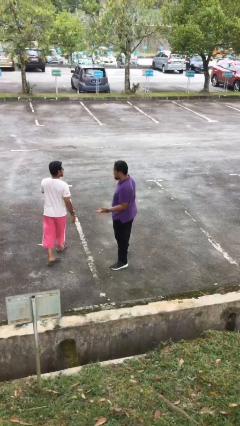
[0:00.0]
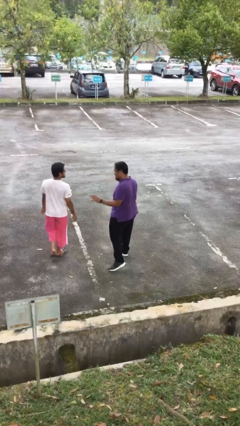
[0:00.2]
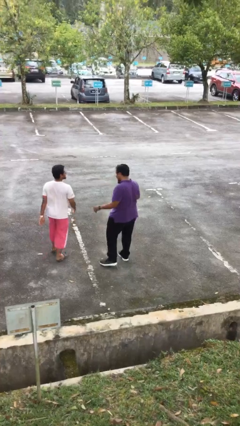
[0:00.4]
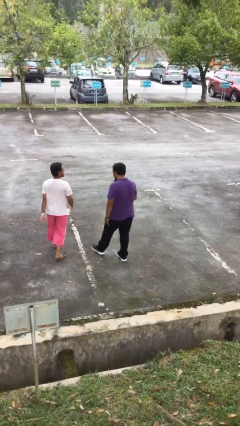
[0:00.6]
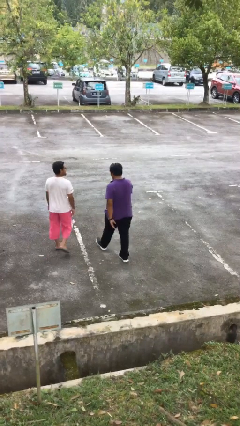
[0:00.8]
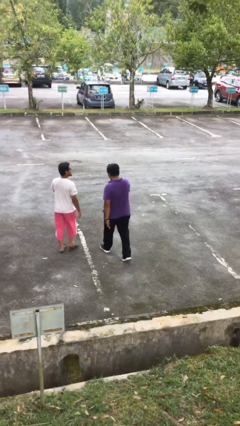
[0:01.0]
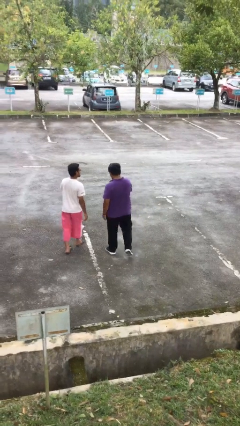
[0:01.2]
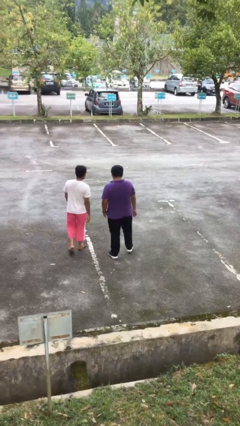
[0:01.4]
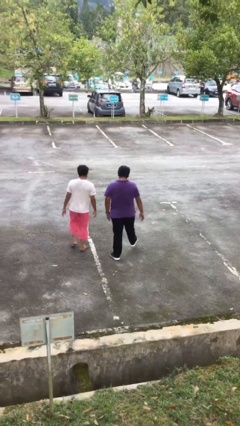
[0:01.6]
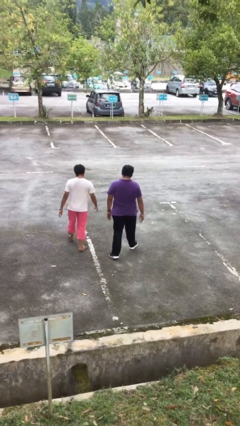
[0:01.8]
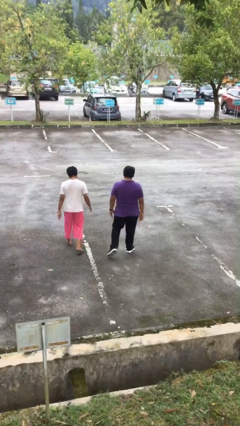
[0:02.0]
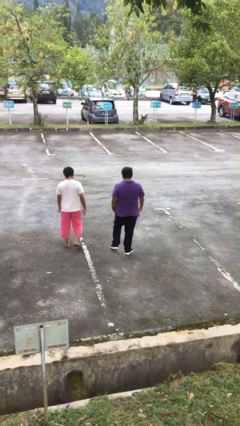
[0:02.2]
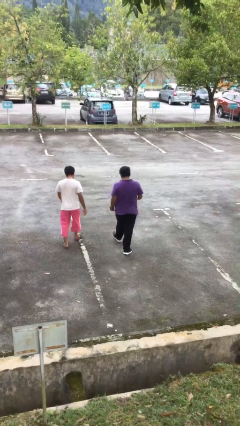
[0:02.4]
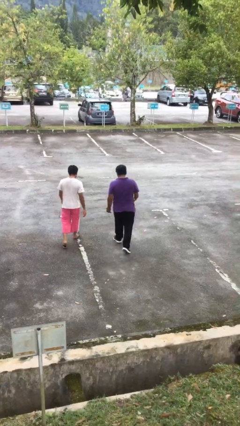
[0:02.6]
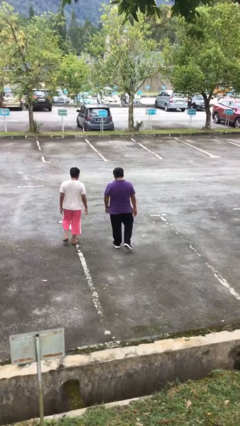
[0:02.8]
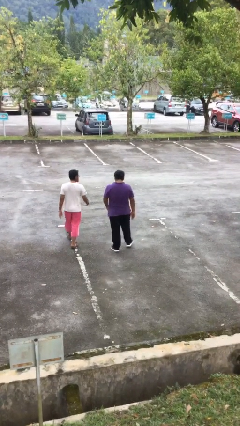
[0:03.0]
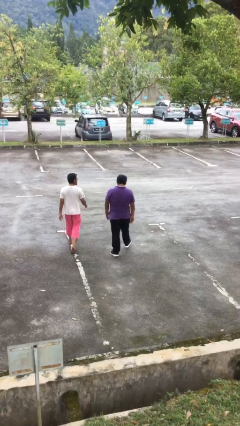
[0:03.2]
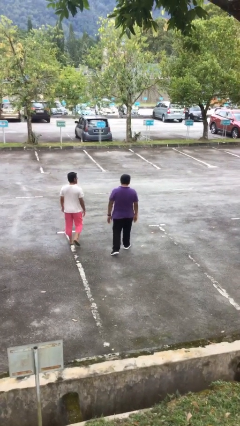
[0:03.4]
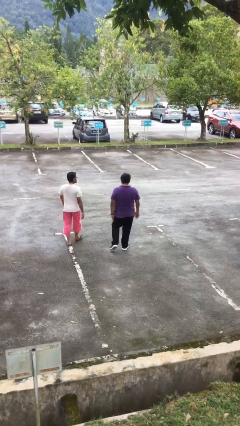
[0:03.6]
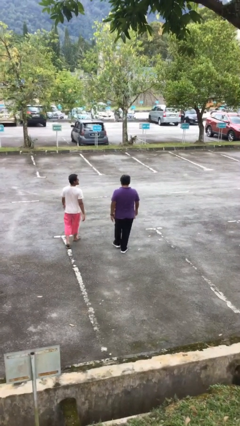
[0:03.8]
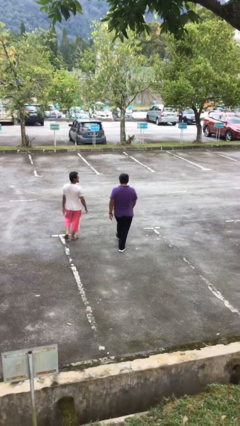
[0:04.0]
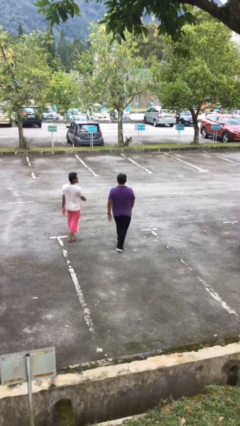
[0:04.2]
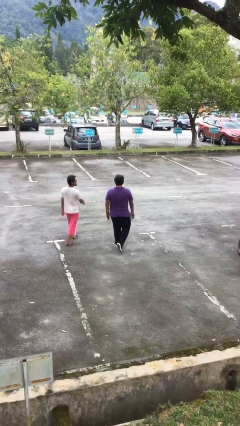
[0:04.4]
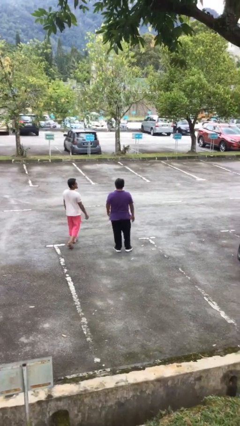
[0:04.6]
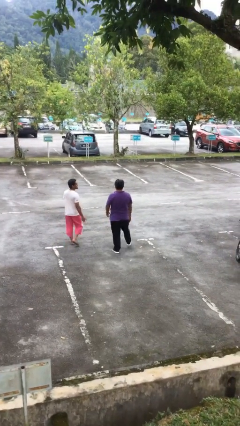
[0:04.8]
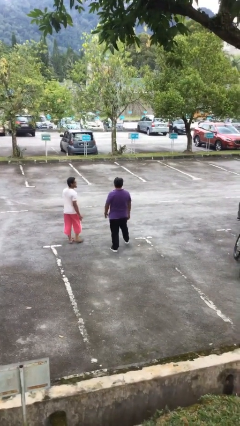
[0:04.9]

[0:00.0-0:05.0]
person talks to person

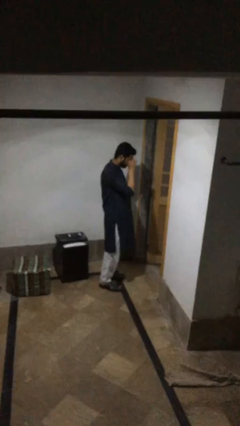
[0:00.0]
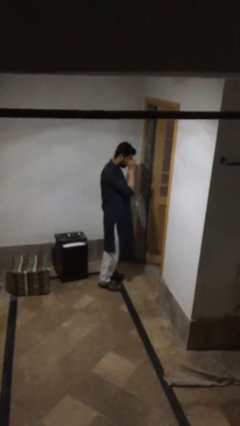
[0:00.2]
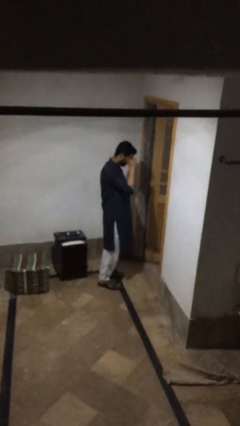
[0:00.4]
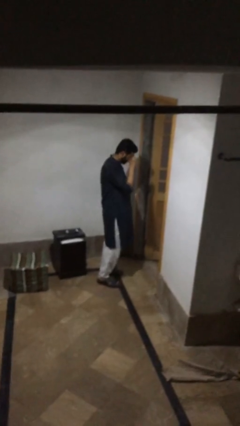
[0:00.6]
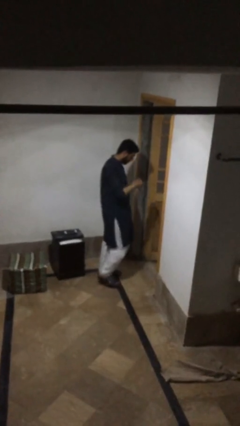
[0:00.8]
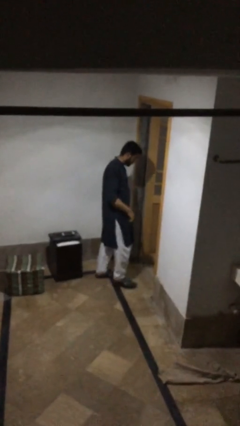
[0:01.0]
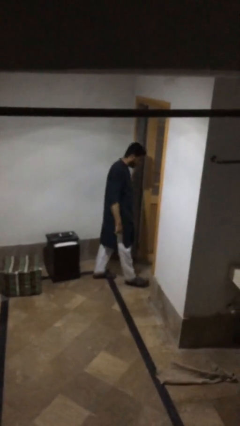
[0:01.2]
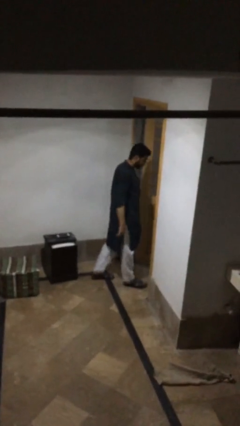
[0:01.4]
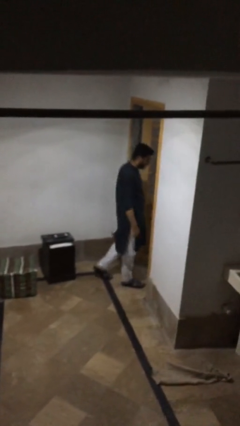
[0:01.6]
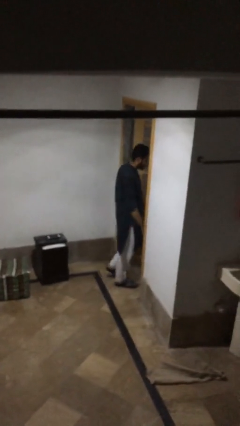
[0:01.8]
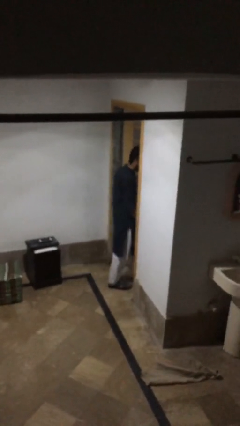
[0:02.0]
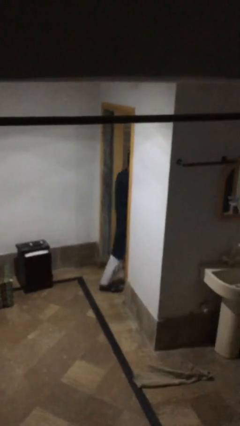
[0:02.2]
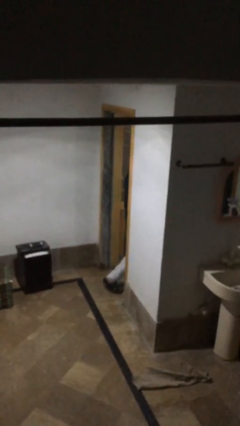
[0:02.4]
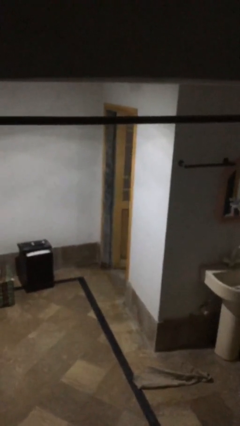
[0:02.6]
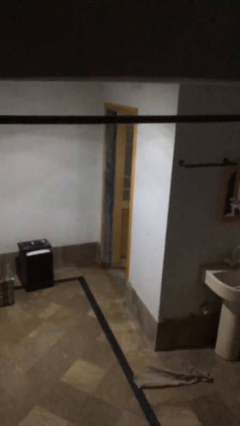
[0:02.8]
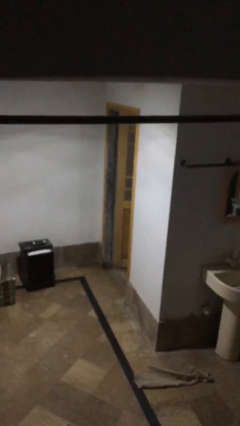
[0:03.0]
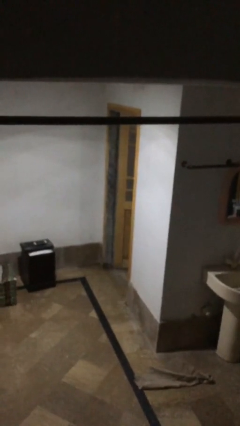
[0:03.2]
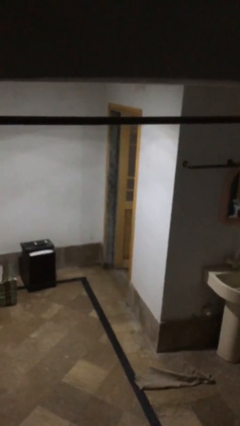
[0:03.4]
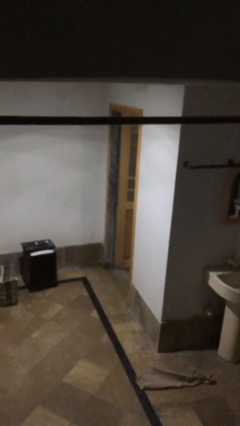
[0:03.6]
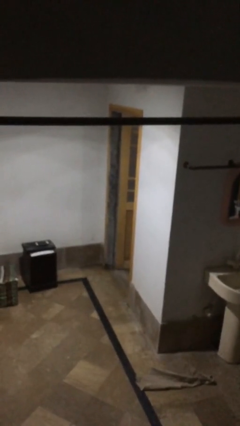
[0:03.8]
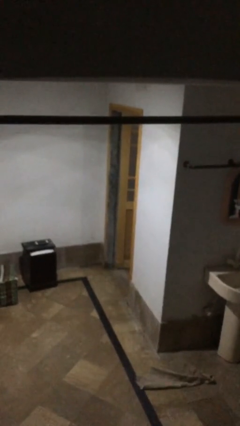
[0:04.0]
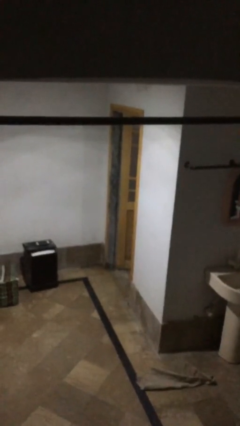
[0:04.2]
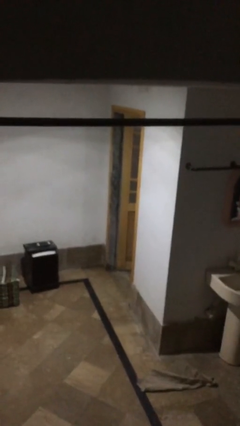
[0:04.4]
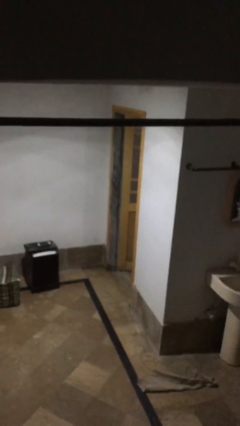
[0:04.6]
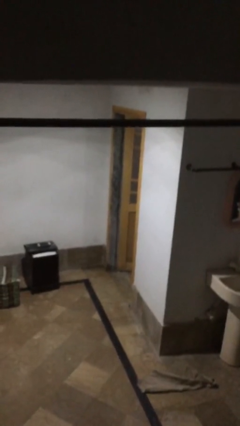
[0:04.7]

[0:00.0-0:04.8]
person exits scene through structure

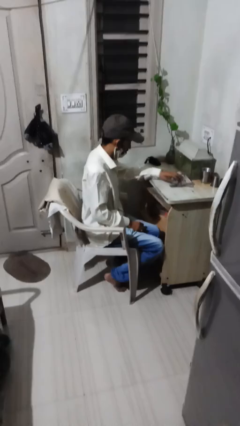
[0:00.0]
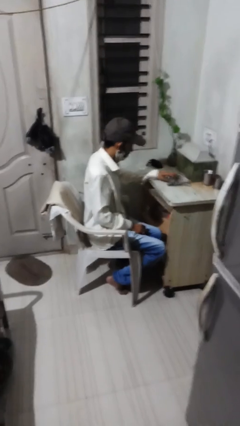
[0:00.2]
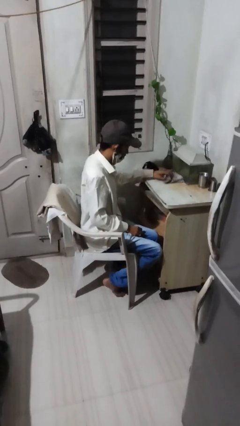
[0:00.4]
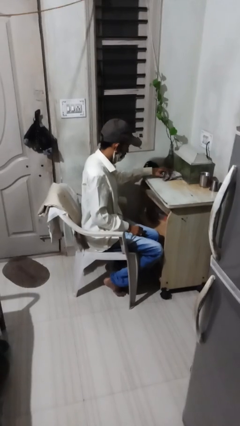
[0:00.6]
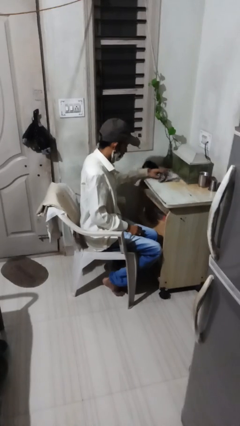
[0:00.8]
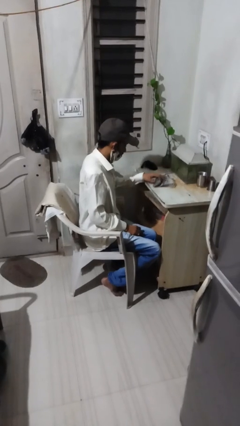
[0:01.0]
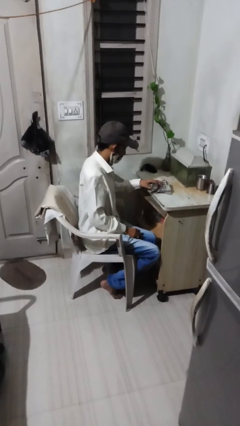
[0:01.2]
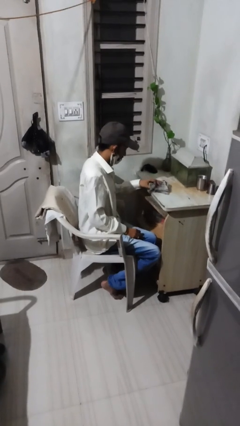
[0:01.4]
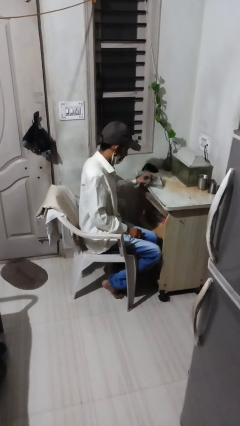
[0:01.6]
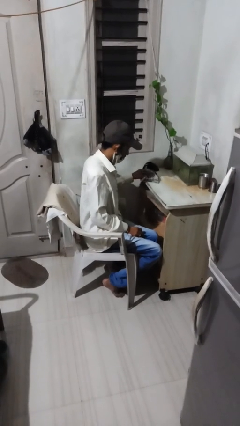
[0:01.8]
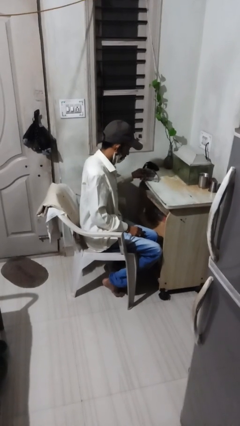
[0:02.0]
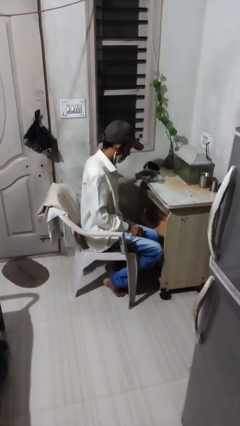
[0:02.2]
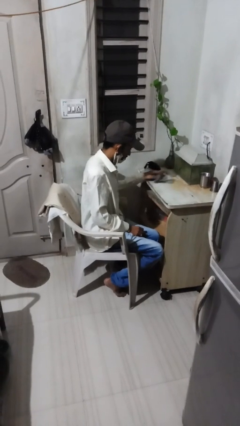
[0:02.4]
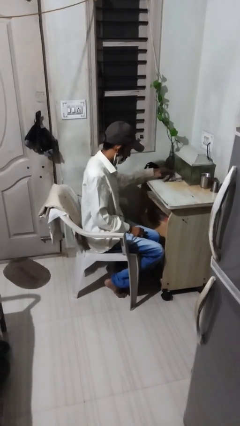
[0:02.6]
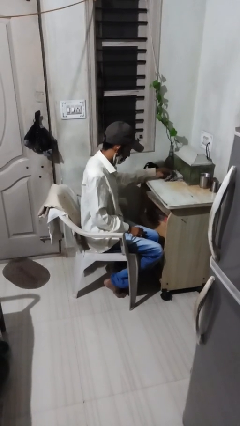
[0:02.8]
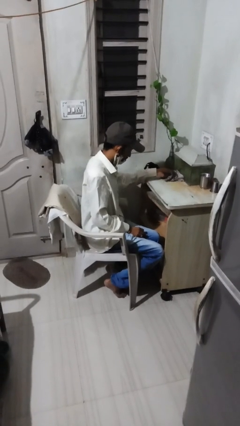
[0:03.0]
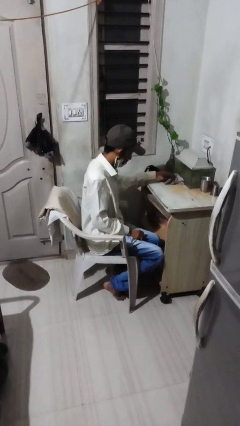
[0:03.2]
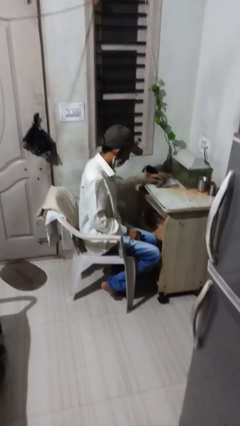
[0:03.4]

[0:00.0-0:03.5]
person cleans table with rag

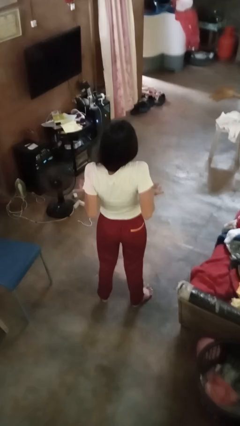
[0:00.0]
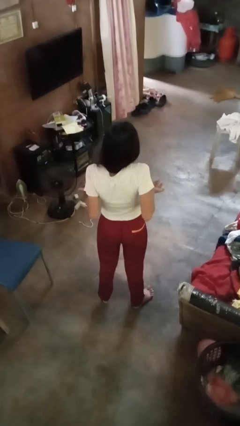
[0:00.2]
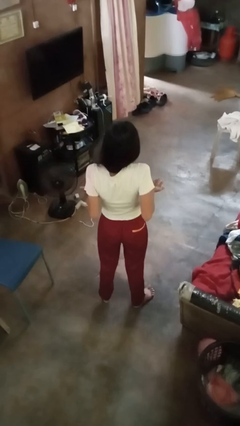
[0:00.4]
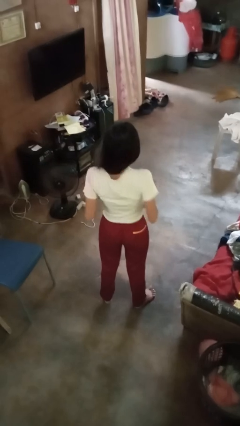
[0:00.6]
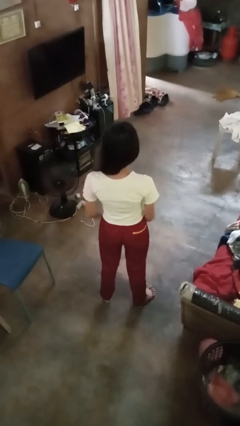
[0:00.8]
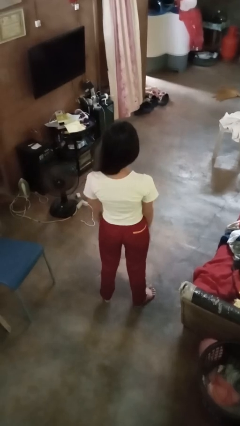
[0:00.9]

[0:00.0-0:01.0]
person shrugs

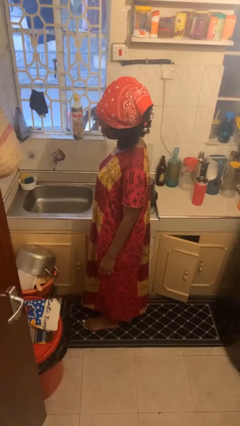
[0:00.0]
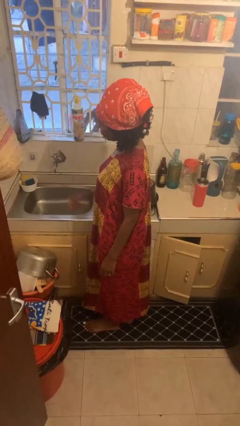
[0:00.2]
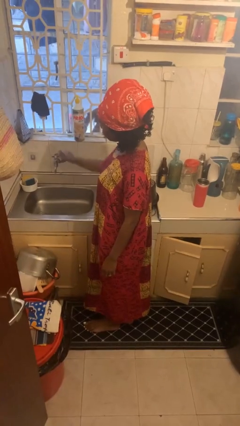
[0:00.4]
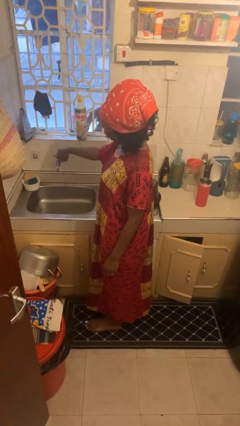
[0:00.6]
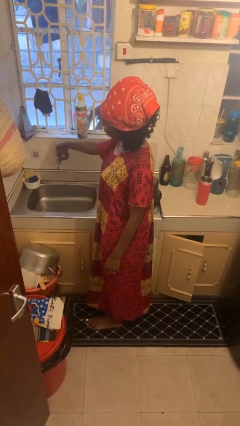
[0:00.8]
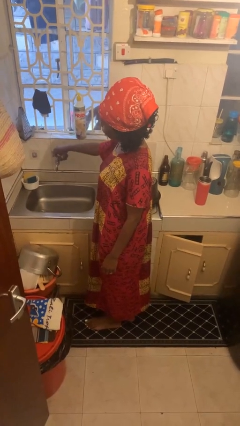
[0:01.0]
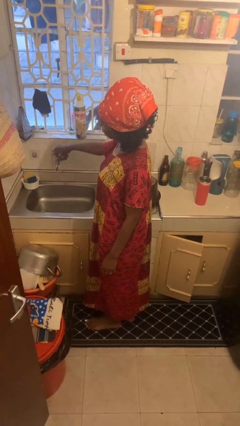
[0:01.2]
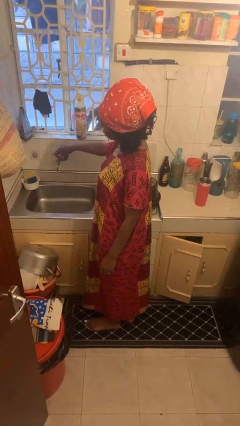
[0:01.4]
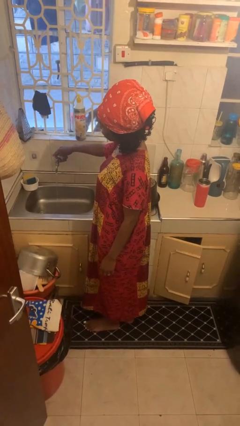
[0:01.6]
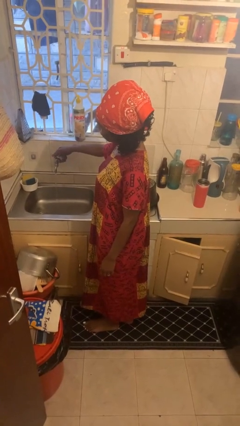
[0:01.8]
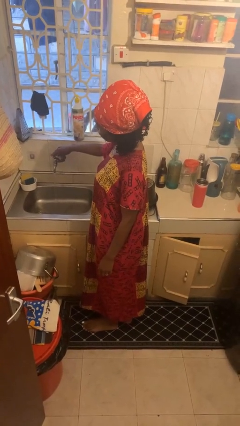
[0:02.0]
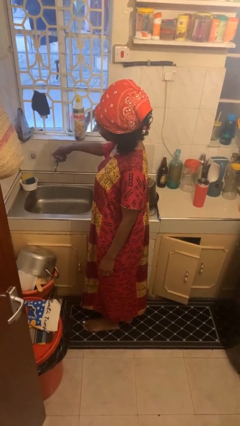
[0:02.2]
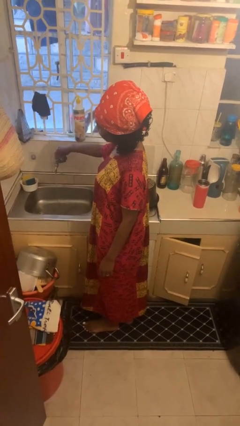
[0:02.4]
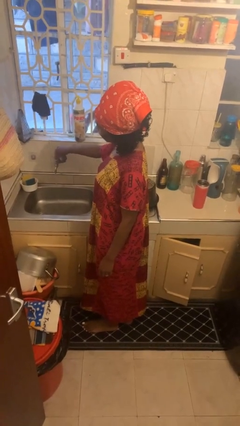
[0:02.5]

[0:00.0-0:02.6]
person turns on faucet

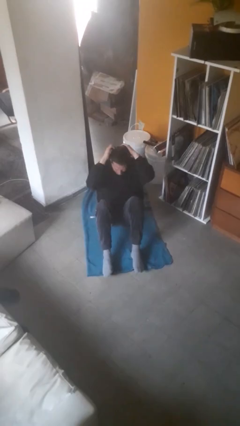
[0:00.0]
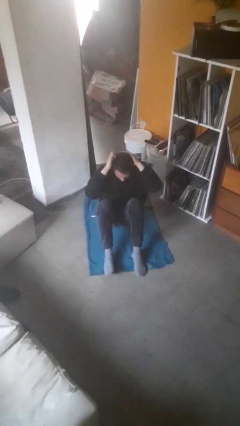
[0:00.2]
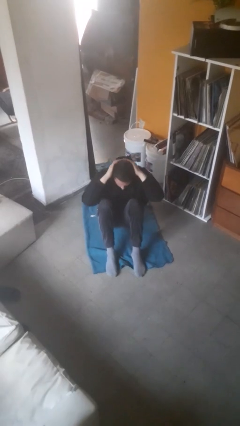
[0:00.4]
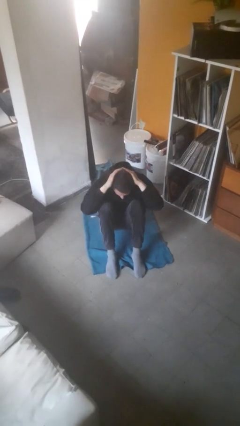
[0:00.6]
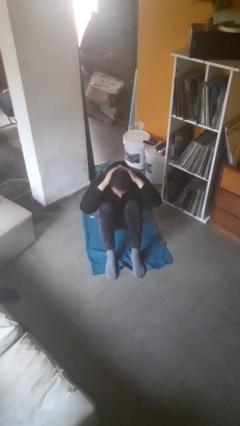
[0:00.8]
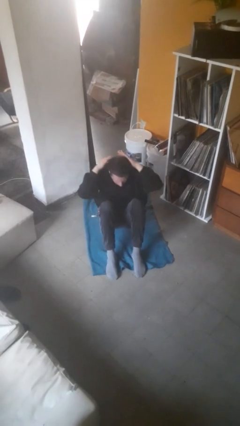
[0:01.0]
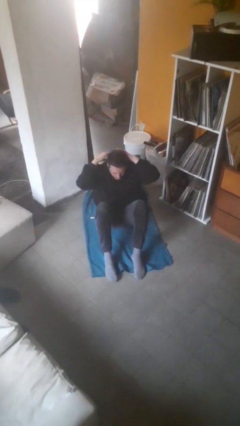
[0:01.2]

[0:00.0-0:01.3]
person exercises with situp
